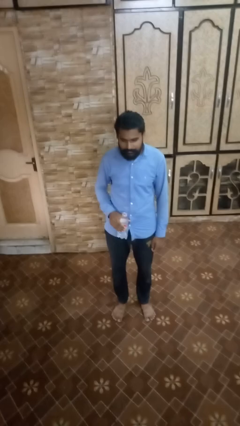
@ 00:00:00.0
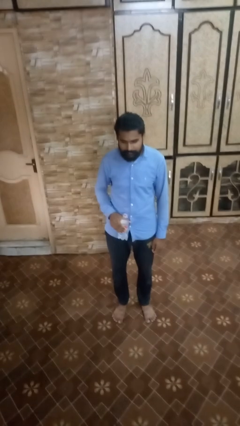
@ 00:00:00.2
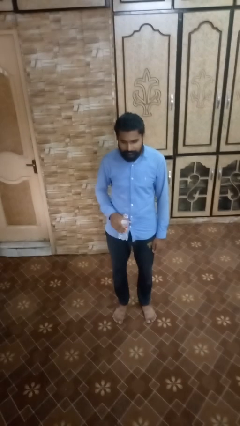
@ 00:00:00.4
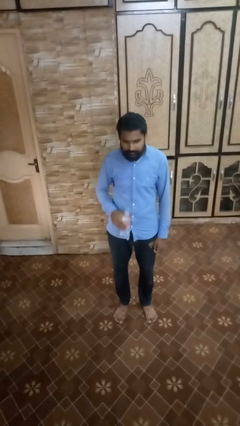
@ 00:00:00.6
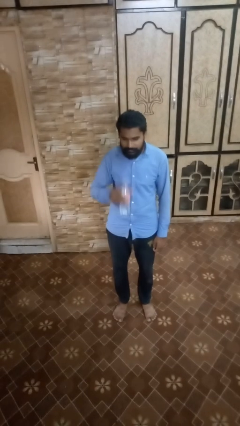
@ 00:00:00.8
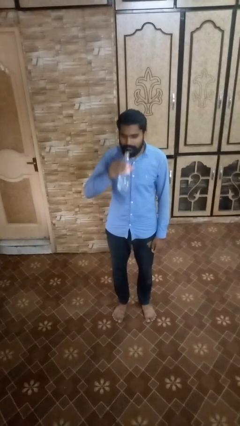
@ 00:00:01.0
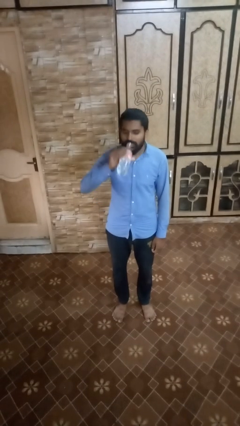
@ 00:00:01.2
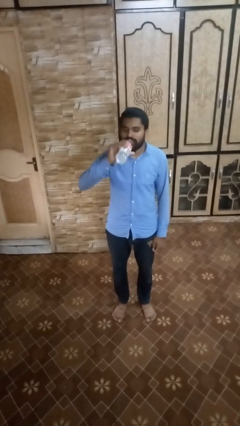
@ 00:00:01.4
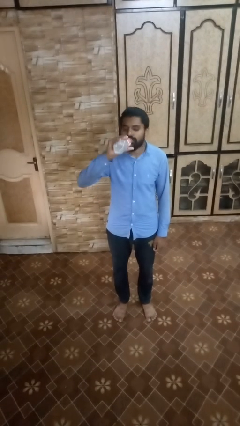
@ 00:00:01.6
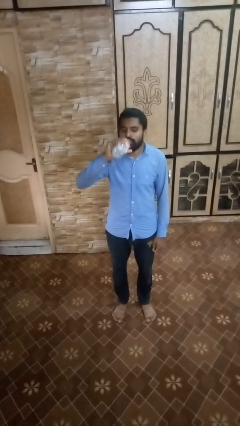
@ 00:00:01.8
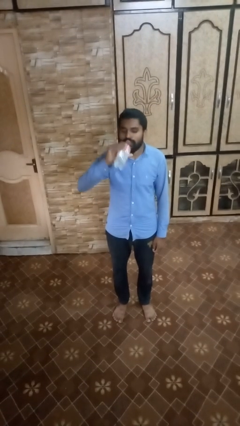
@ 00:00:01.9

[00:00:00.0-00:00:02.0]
person drinks from bottle

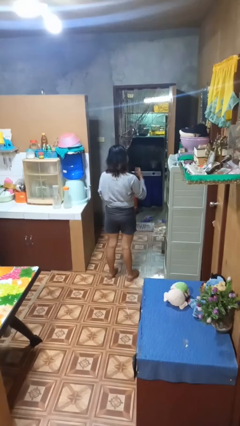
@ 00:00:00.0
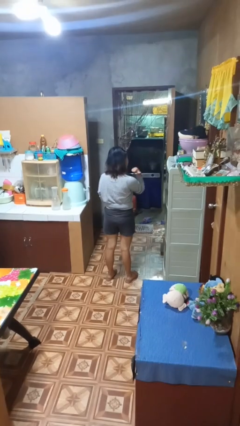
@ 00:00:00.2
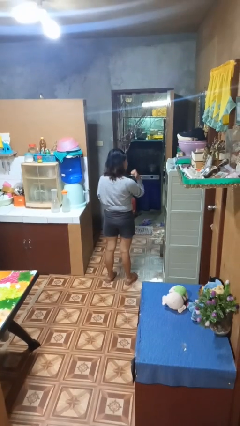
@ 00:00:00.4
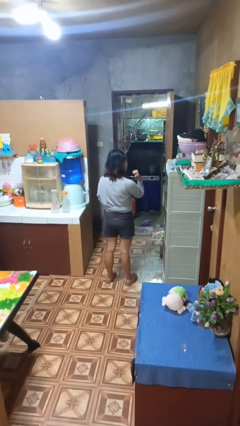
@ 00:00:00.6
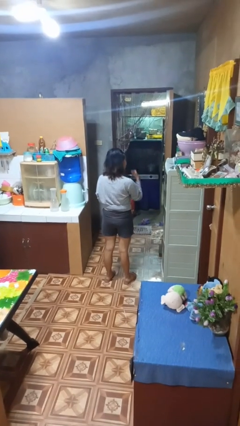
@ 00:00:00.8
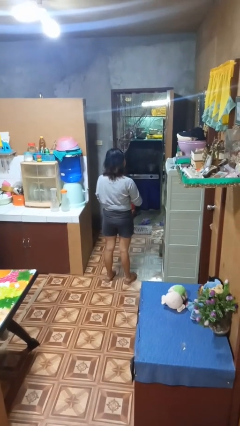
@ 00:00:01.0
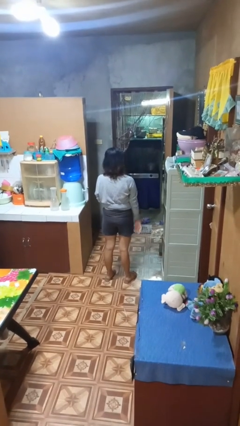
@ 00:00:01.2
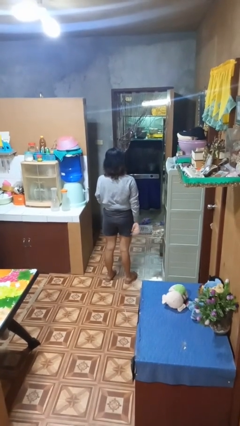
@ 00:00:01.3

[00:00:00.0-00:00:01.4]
person gestures behind me

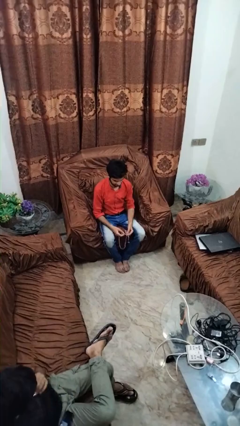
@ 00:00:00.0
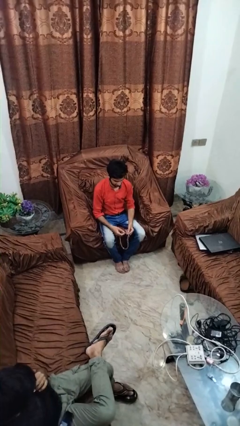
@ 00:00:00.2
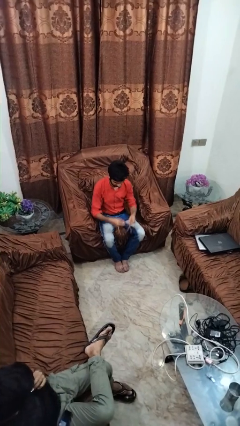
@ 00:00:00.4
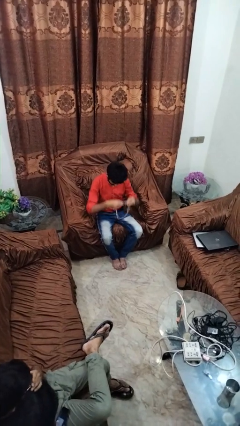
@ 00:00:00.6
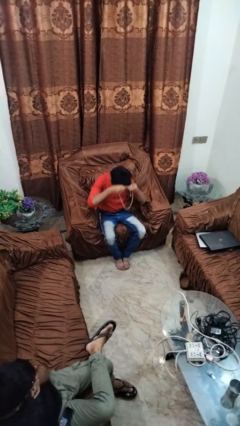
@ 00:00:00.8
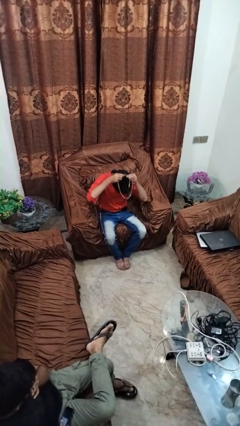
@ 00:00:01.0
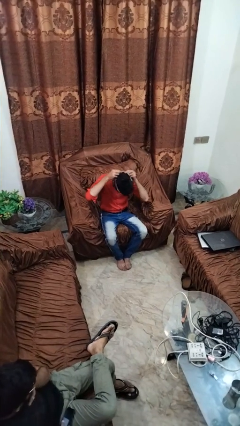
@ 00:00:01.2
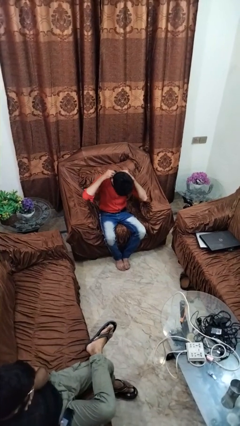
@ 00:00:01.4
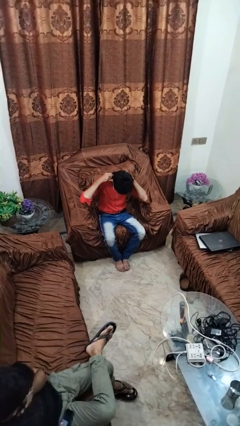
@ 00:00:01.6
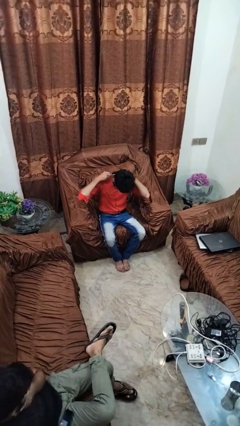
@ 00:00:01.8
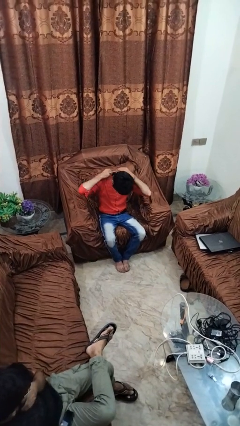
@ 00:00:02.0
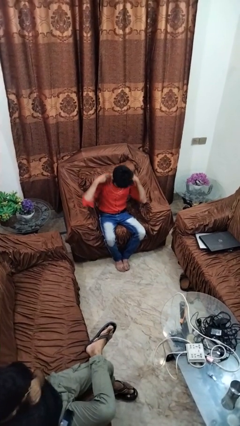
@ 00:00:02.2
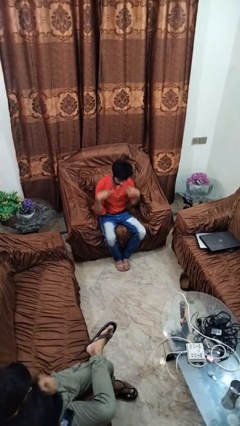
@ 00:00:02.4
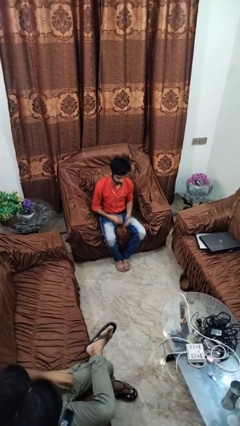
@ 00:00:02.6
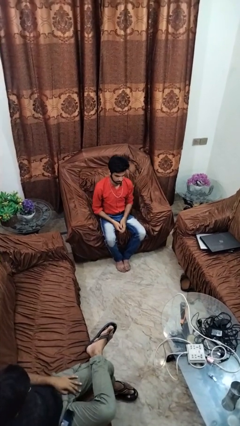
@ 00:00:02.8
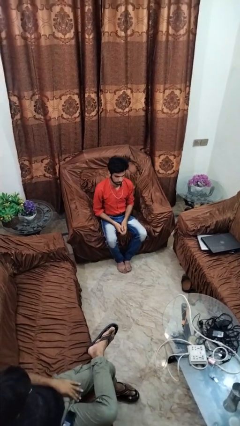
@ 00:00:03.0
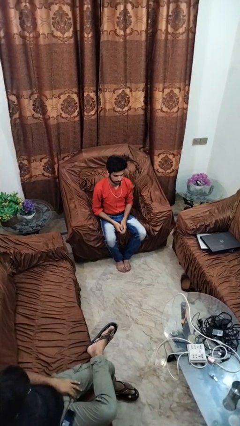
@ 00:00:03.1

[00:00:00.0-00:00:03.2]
person puts on necklace

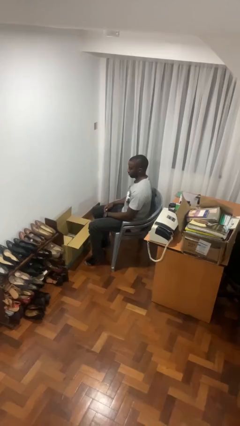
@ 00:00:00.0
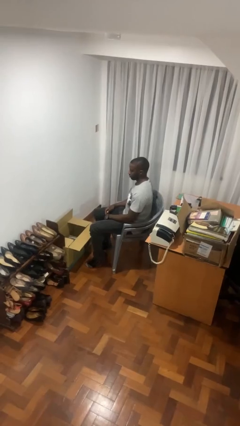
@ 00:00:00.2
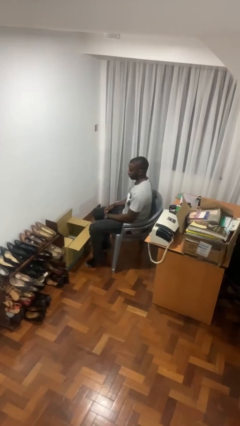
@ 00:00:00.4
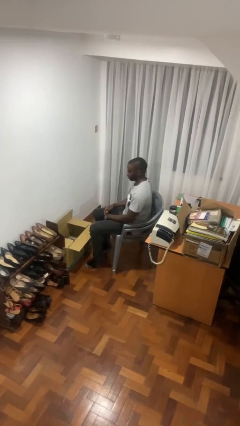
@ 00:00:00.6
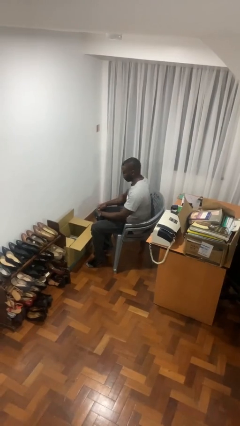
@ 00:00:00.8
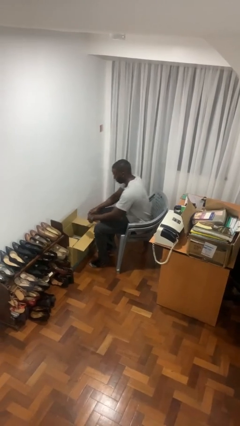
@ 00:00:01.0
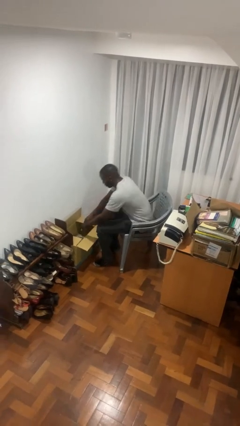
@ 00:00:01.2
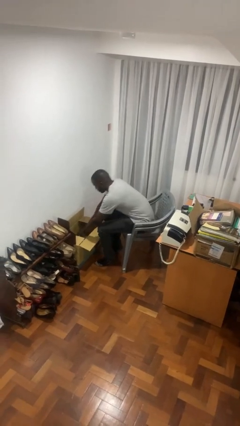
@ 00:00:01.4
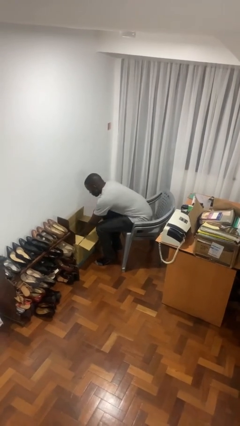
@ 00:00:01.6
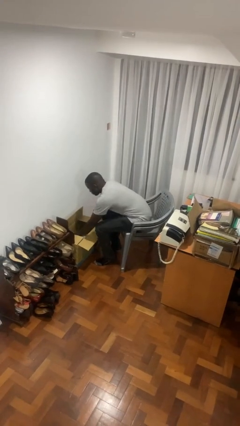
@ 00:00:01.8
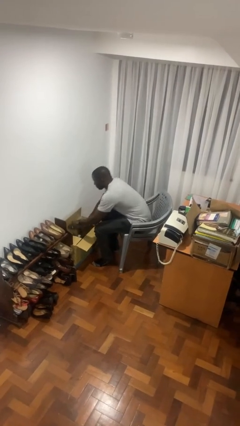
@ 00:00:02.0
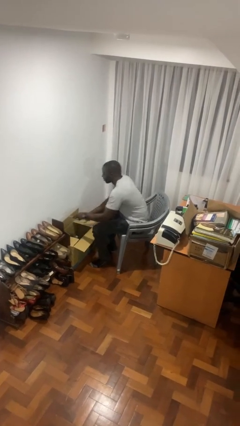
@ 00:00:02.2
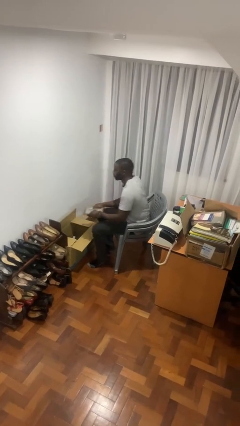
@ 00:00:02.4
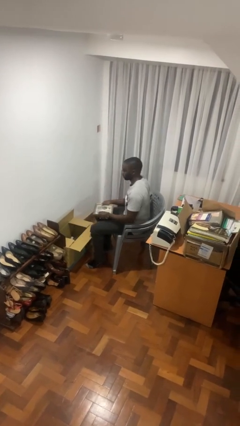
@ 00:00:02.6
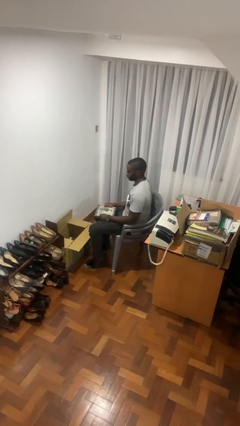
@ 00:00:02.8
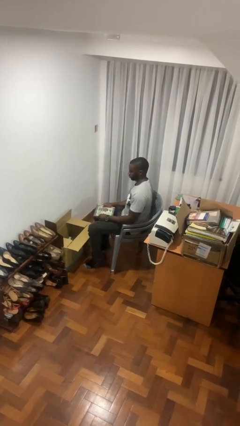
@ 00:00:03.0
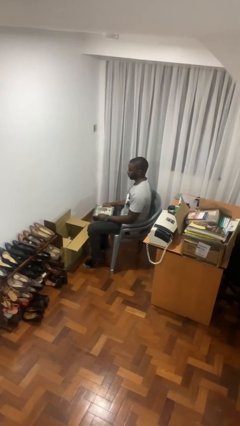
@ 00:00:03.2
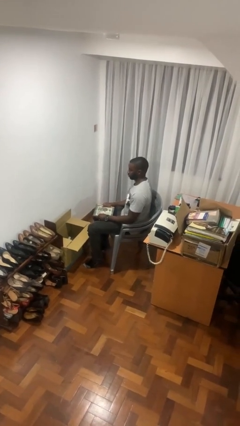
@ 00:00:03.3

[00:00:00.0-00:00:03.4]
person takes object from box

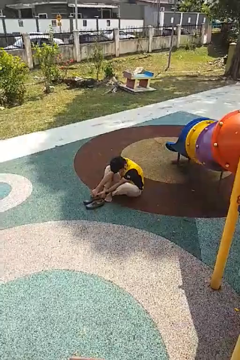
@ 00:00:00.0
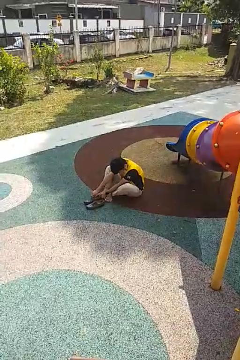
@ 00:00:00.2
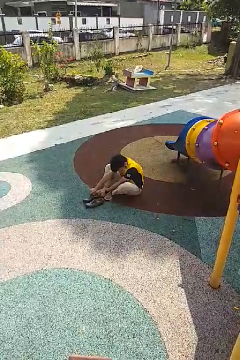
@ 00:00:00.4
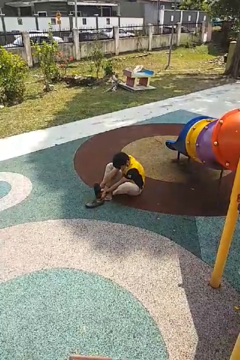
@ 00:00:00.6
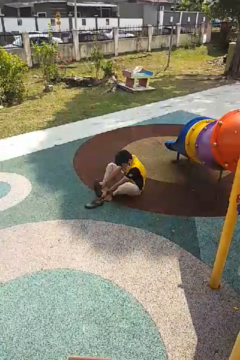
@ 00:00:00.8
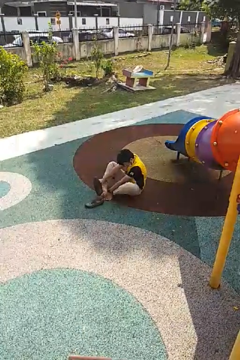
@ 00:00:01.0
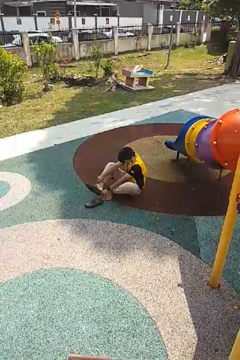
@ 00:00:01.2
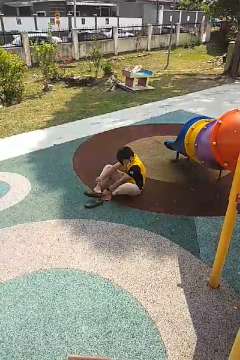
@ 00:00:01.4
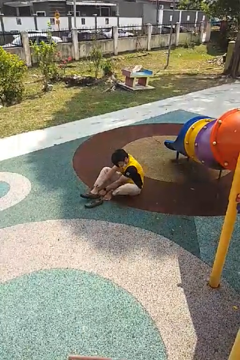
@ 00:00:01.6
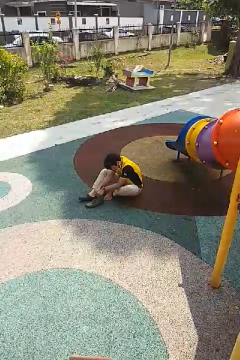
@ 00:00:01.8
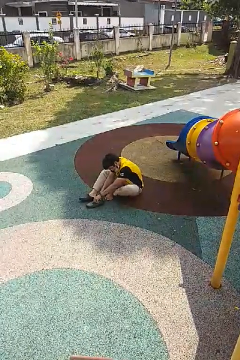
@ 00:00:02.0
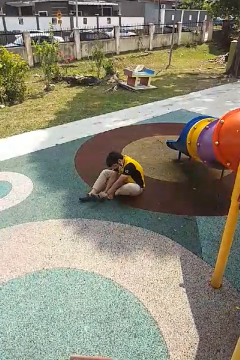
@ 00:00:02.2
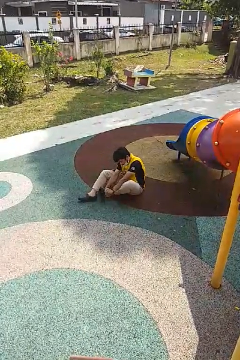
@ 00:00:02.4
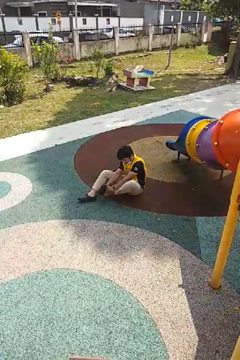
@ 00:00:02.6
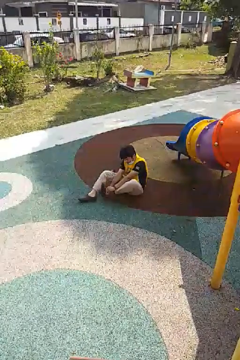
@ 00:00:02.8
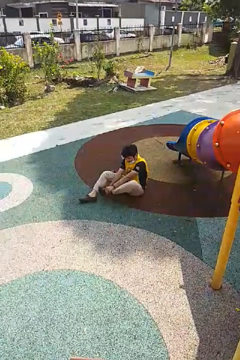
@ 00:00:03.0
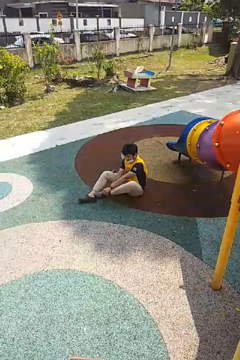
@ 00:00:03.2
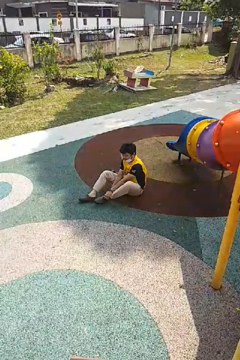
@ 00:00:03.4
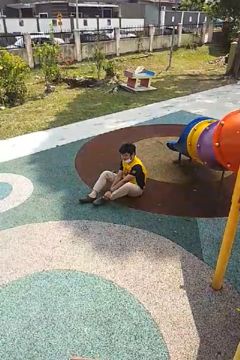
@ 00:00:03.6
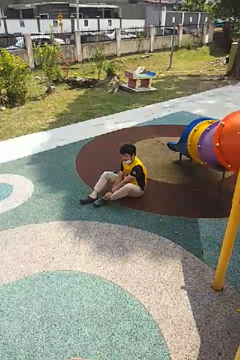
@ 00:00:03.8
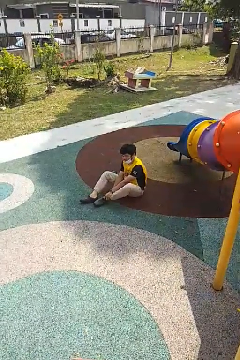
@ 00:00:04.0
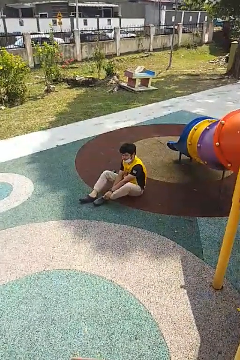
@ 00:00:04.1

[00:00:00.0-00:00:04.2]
person puts on shoes

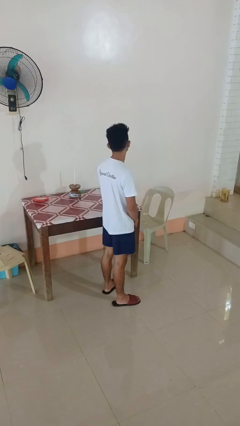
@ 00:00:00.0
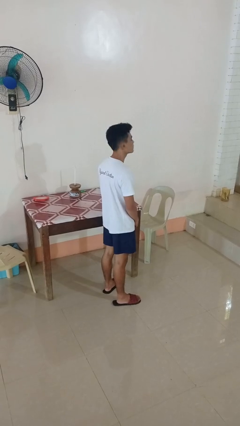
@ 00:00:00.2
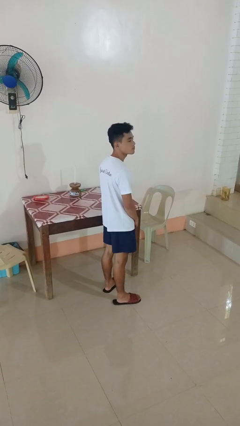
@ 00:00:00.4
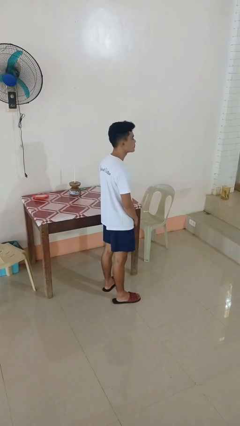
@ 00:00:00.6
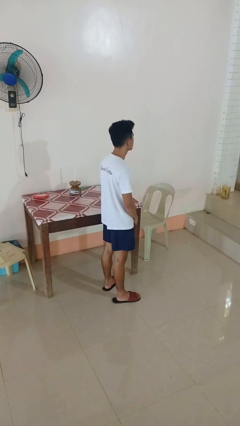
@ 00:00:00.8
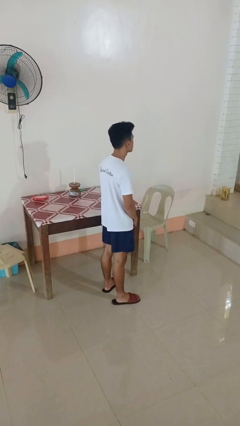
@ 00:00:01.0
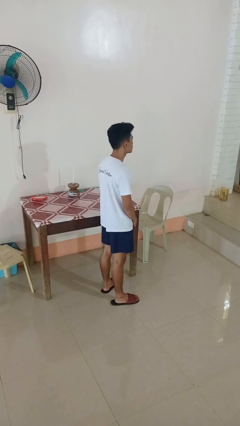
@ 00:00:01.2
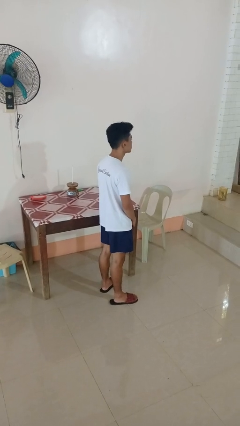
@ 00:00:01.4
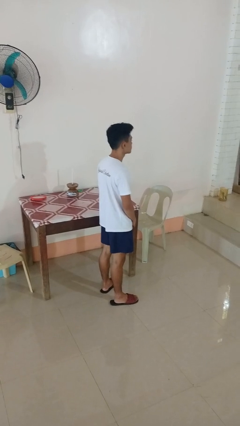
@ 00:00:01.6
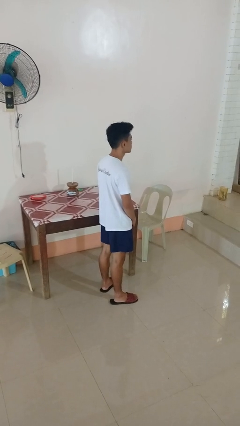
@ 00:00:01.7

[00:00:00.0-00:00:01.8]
person shakes head

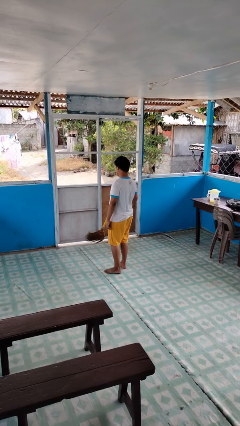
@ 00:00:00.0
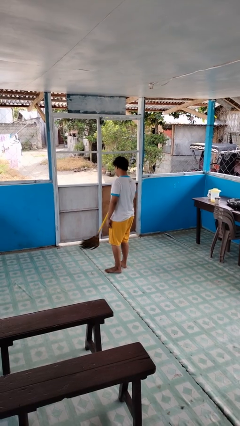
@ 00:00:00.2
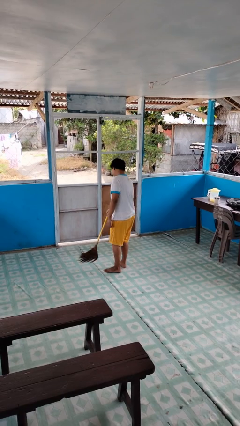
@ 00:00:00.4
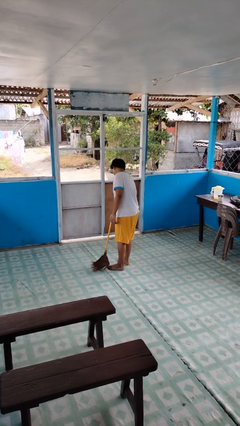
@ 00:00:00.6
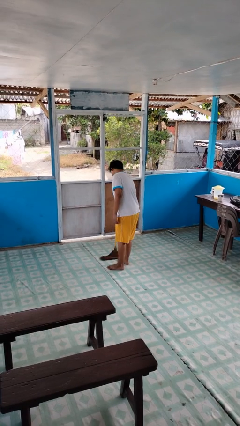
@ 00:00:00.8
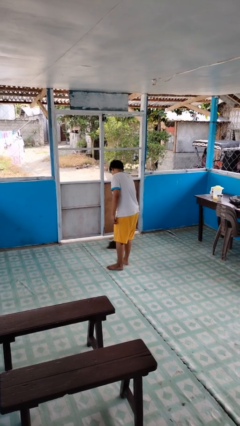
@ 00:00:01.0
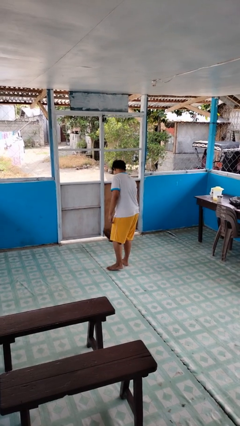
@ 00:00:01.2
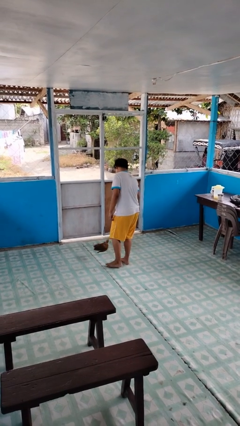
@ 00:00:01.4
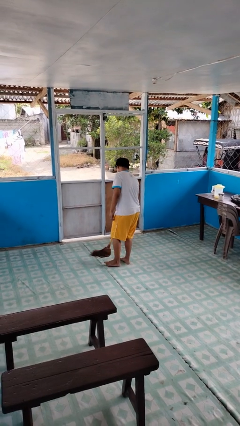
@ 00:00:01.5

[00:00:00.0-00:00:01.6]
person sweeps floor
